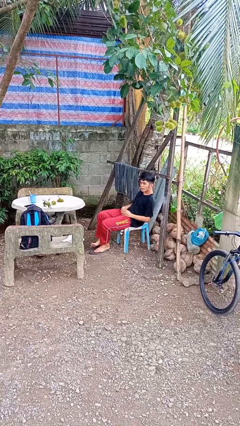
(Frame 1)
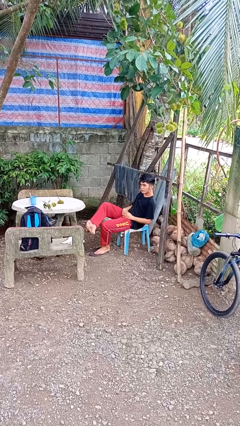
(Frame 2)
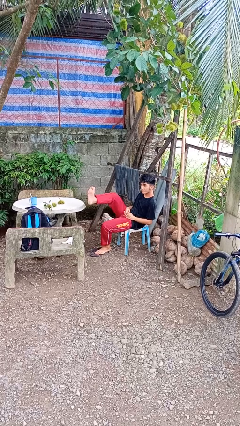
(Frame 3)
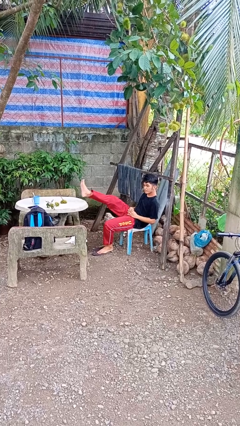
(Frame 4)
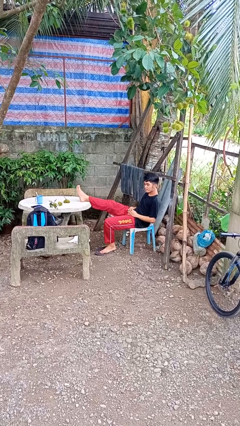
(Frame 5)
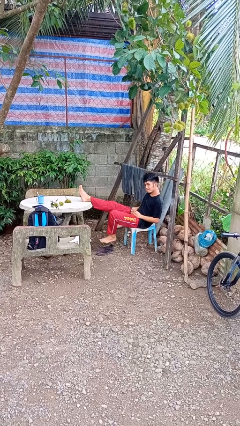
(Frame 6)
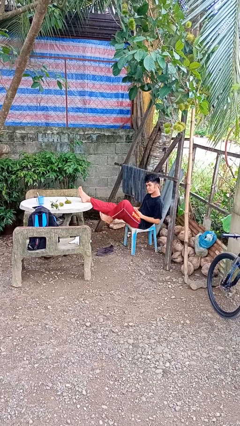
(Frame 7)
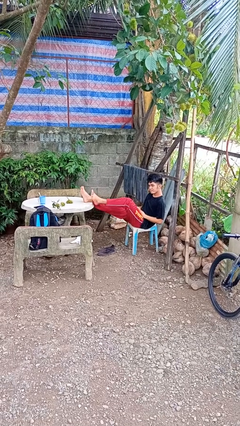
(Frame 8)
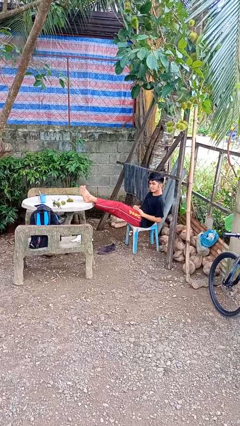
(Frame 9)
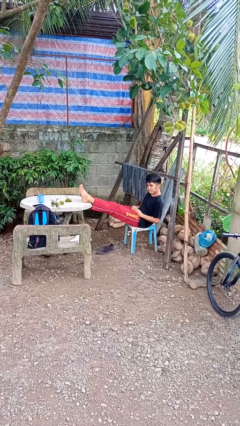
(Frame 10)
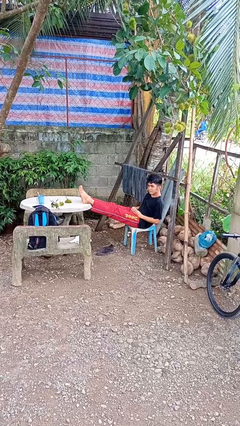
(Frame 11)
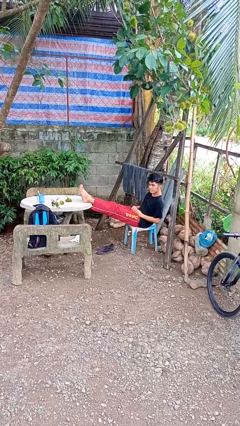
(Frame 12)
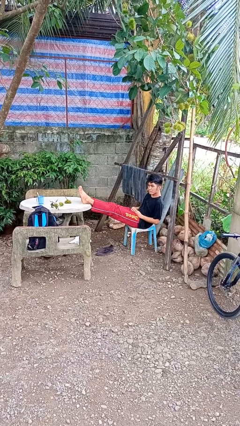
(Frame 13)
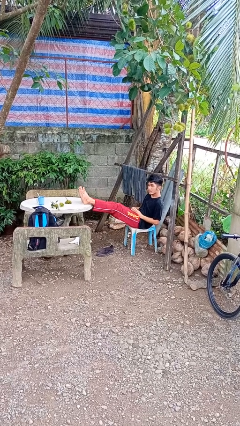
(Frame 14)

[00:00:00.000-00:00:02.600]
person puts feet up

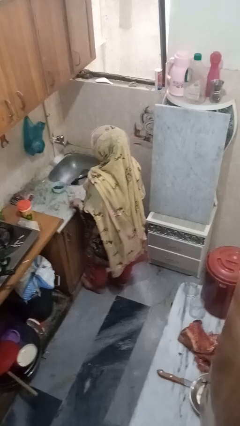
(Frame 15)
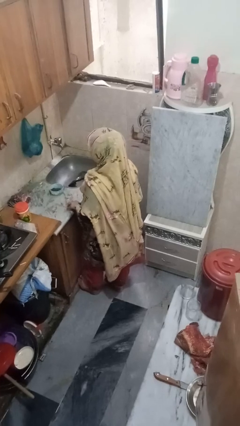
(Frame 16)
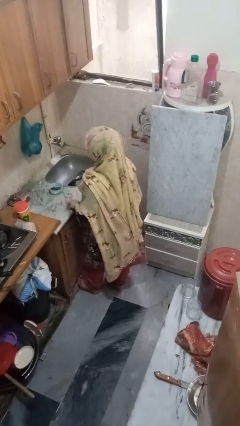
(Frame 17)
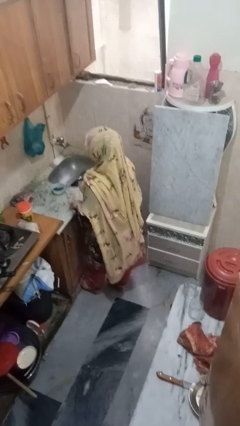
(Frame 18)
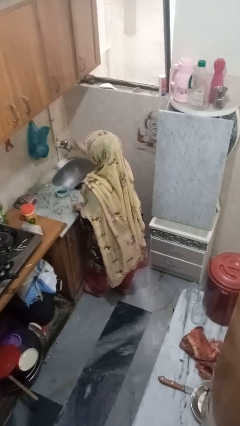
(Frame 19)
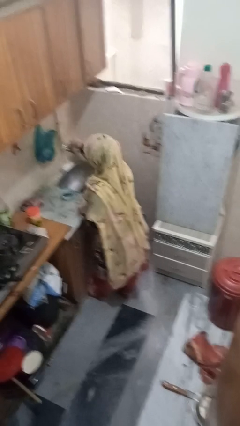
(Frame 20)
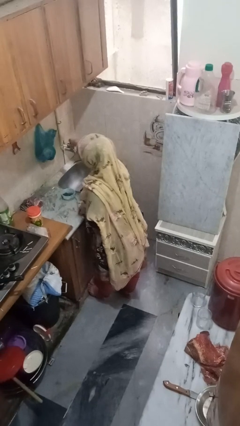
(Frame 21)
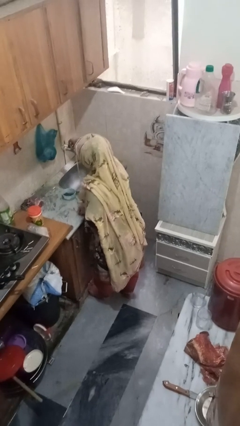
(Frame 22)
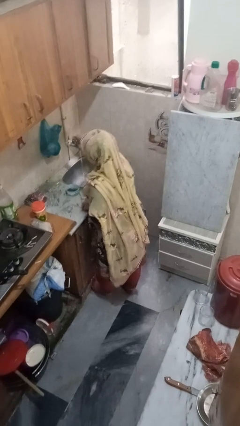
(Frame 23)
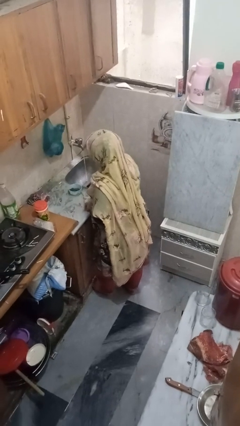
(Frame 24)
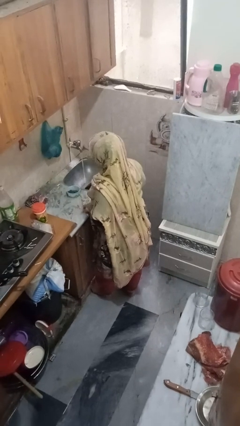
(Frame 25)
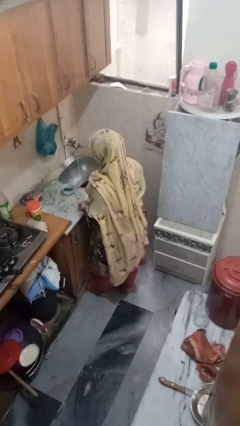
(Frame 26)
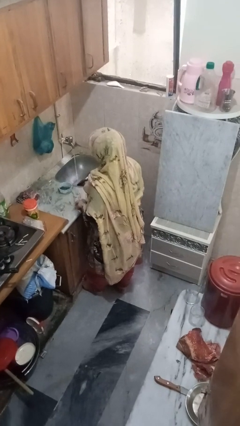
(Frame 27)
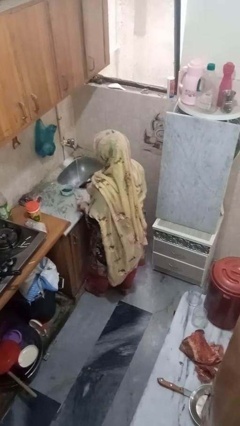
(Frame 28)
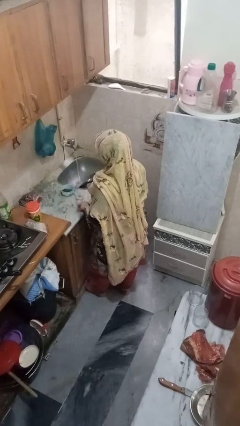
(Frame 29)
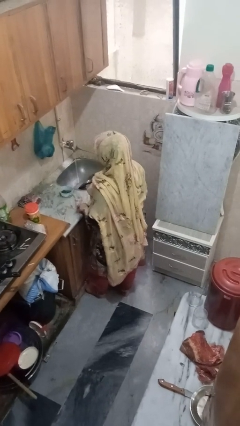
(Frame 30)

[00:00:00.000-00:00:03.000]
person turns on faucet

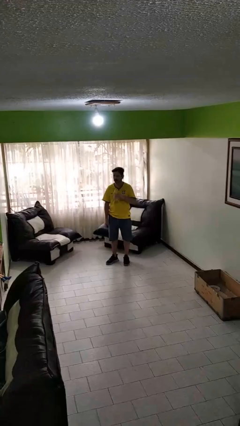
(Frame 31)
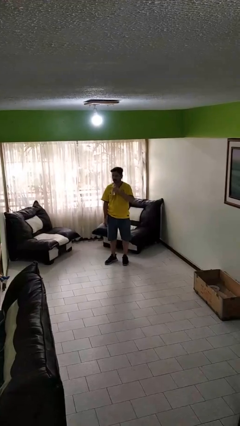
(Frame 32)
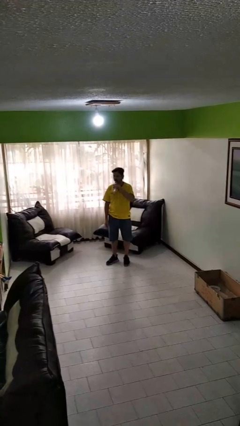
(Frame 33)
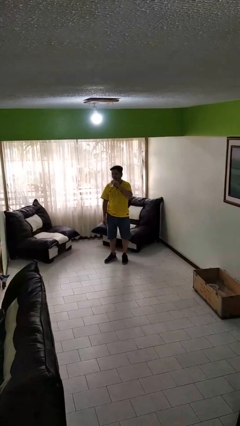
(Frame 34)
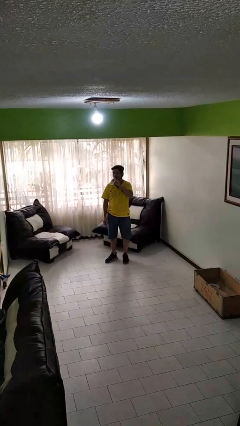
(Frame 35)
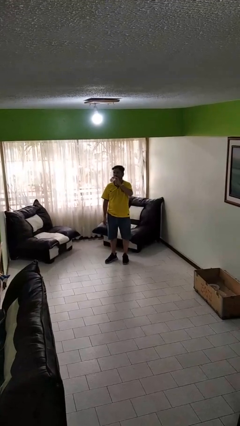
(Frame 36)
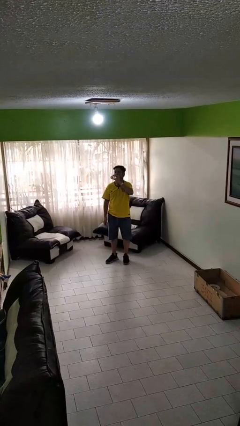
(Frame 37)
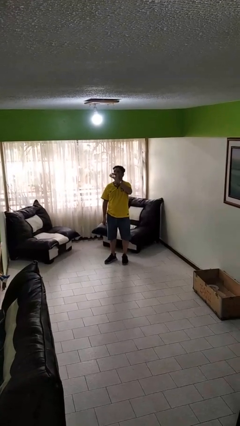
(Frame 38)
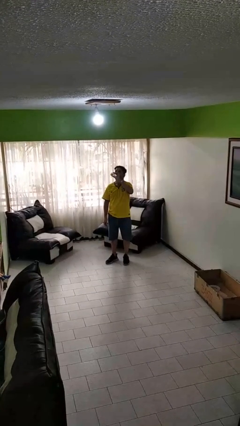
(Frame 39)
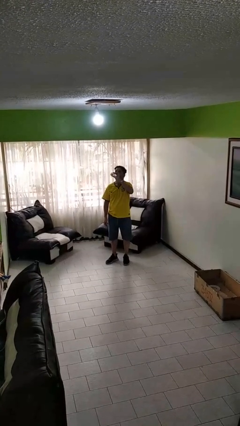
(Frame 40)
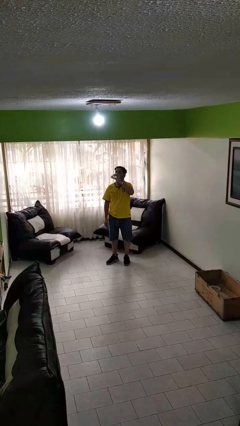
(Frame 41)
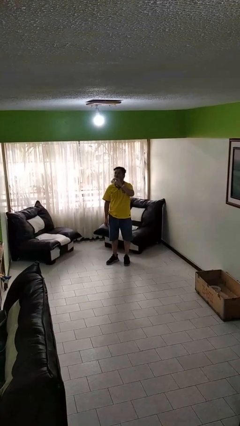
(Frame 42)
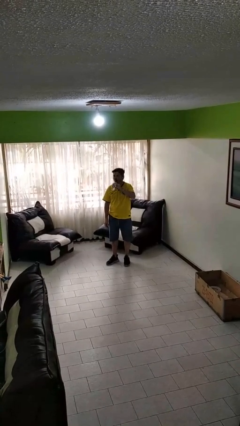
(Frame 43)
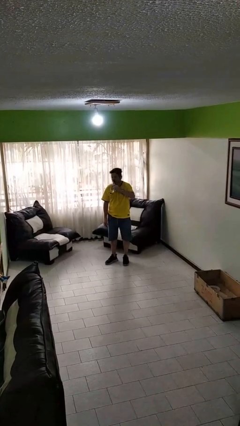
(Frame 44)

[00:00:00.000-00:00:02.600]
person drinks from bottle

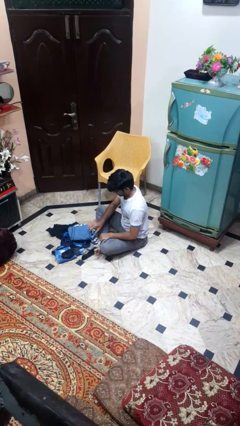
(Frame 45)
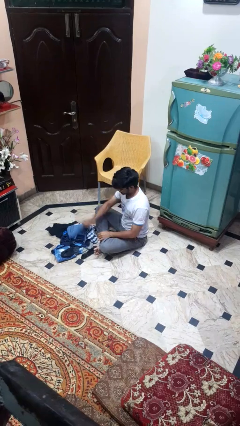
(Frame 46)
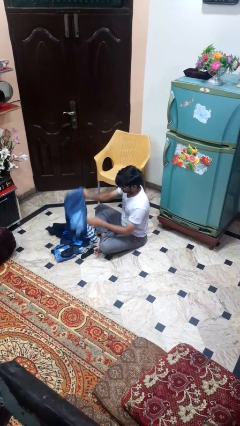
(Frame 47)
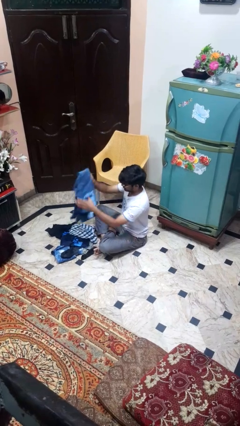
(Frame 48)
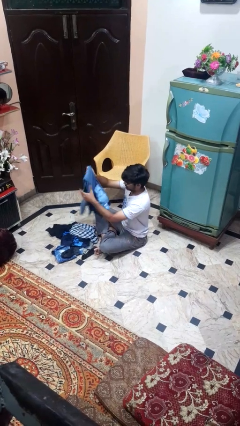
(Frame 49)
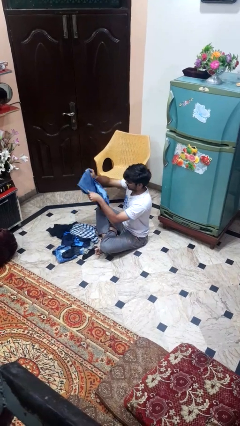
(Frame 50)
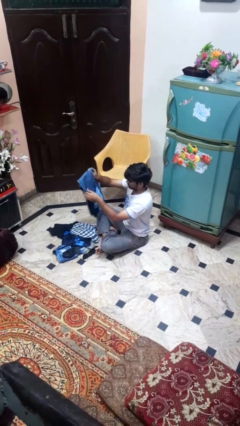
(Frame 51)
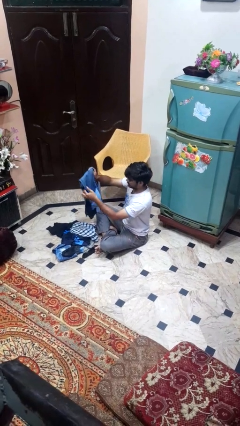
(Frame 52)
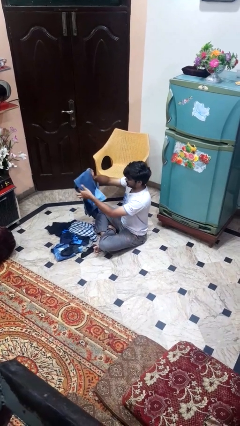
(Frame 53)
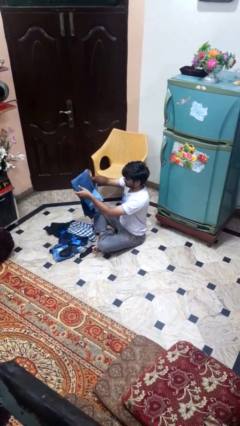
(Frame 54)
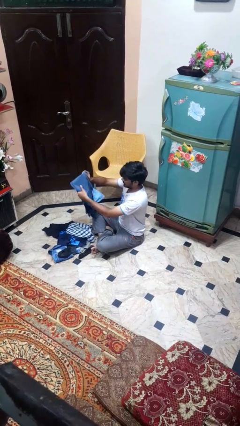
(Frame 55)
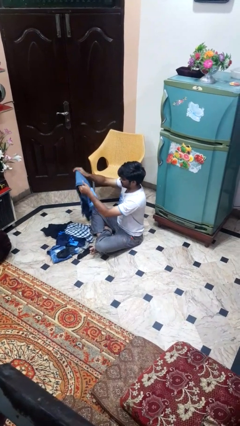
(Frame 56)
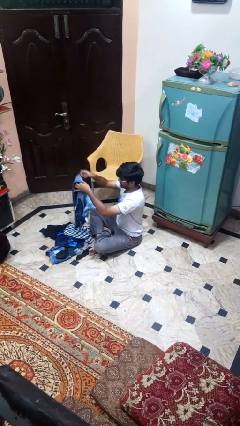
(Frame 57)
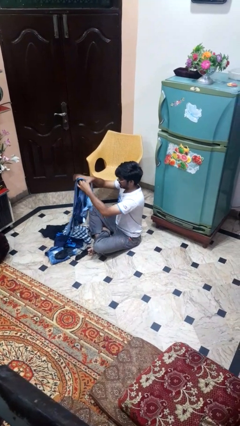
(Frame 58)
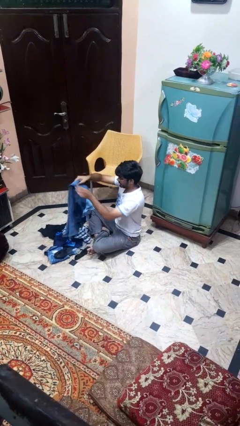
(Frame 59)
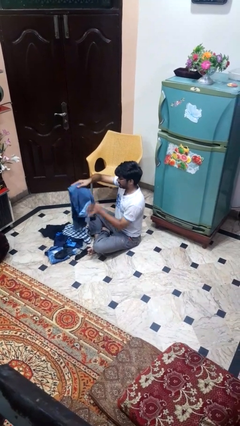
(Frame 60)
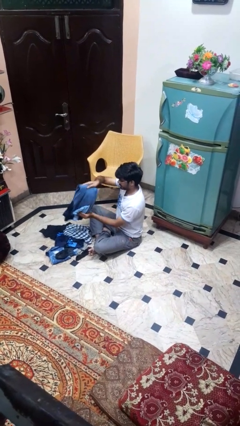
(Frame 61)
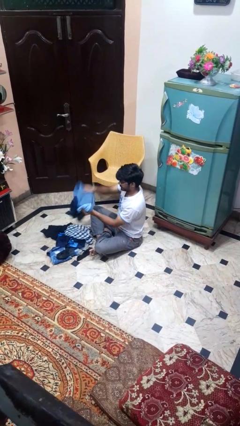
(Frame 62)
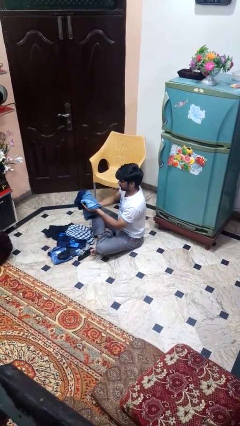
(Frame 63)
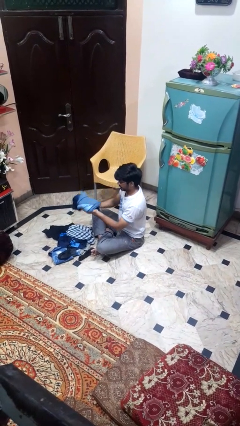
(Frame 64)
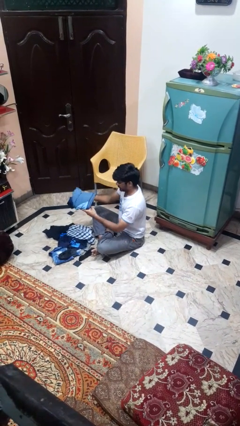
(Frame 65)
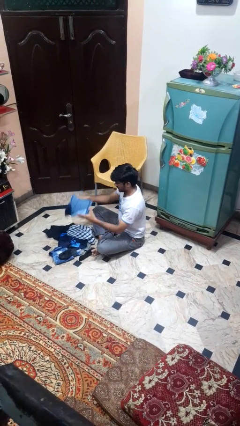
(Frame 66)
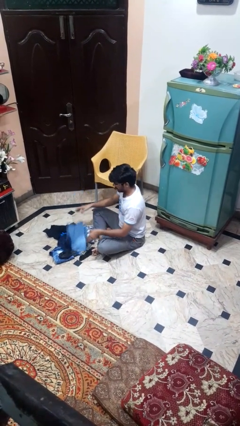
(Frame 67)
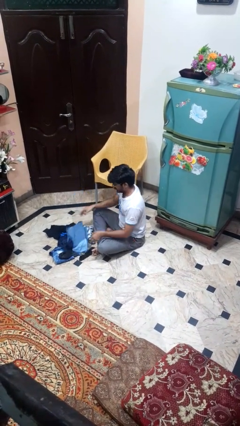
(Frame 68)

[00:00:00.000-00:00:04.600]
person folds pants

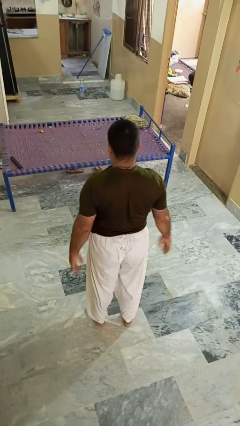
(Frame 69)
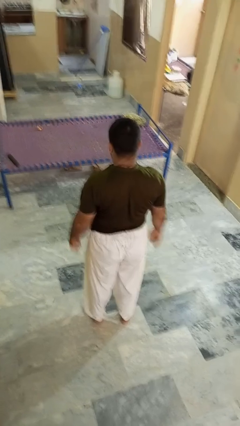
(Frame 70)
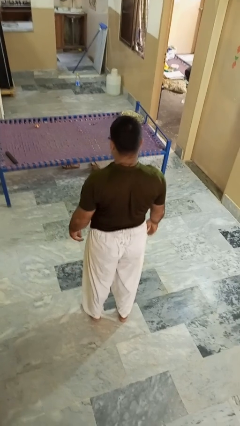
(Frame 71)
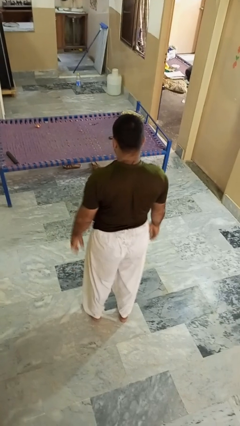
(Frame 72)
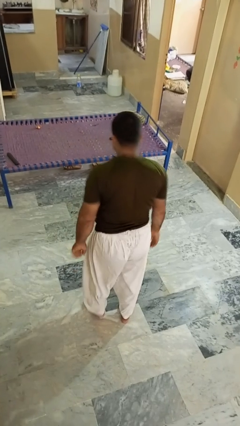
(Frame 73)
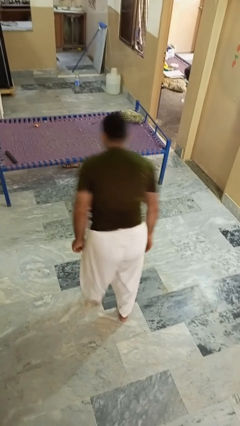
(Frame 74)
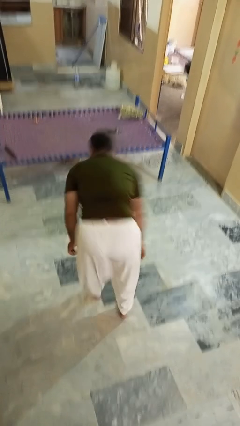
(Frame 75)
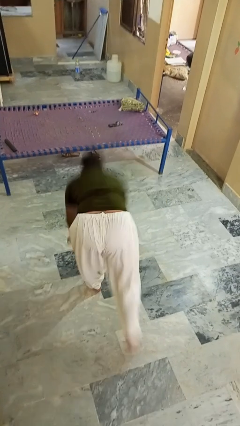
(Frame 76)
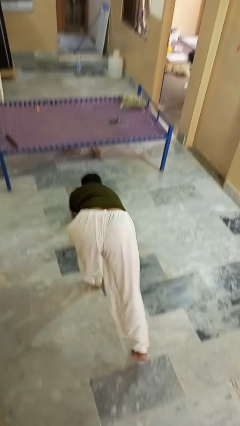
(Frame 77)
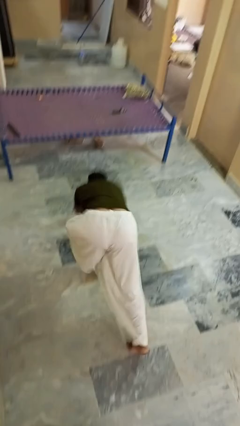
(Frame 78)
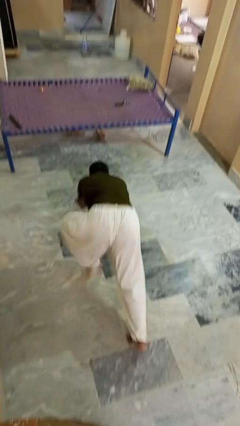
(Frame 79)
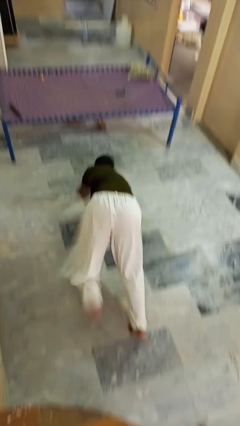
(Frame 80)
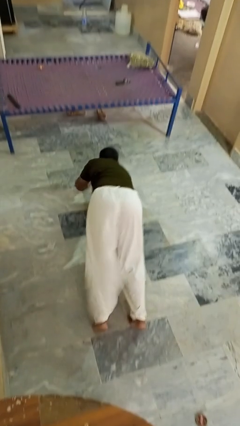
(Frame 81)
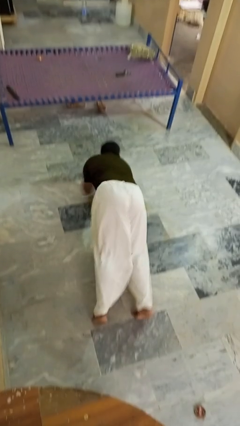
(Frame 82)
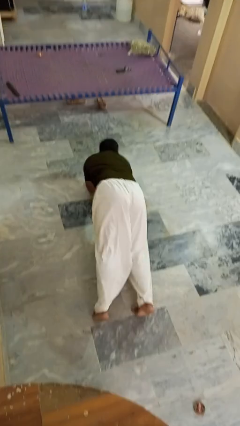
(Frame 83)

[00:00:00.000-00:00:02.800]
person exercises with plank

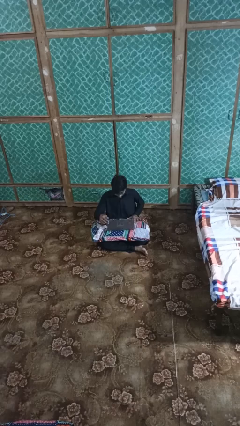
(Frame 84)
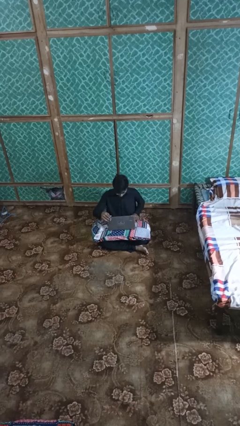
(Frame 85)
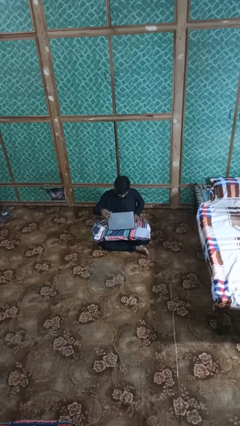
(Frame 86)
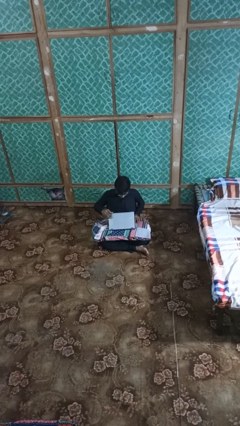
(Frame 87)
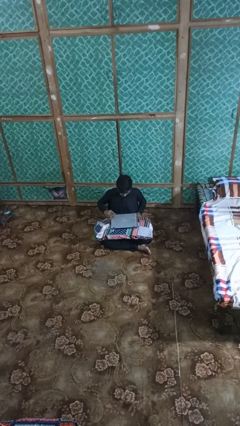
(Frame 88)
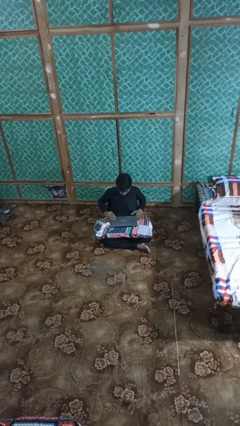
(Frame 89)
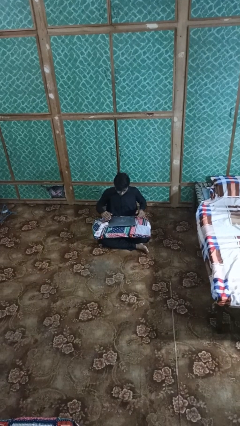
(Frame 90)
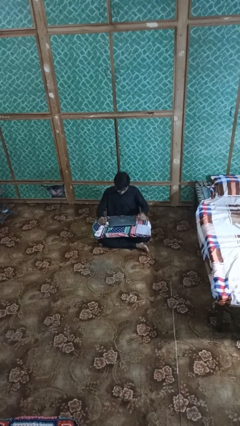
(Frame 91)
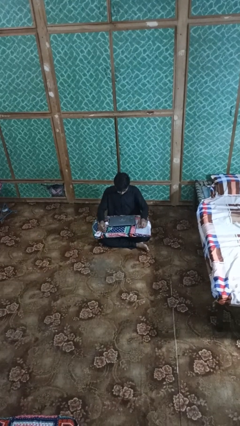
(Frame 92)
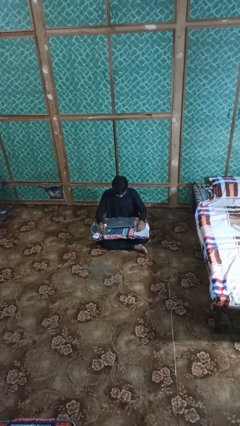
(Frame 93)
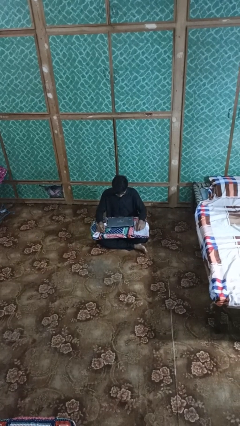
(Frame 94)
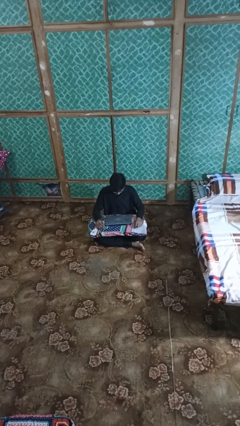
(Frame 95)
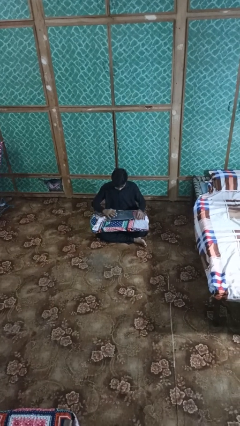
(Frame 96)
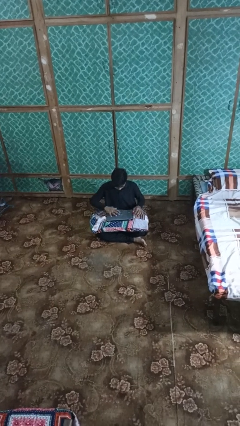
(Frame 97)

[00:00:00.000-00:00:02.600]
person closes laptop
